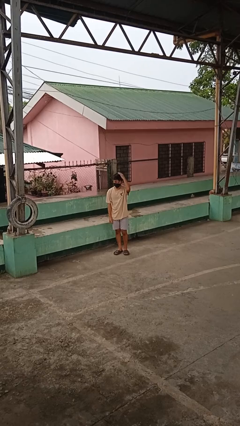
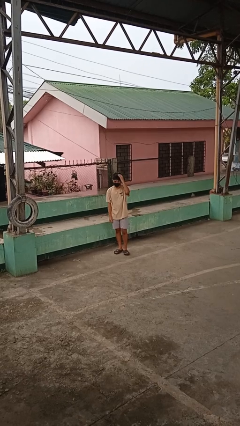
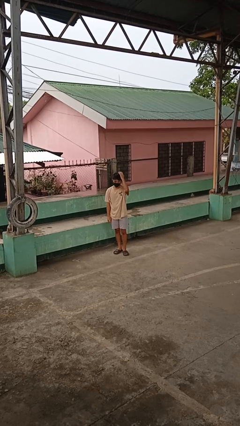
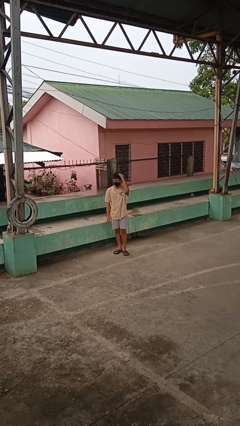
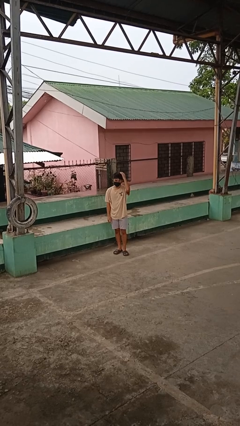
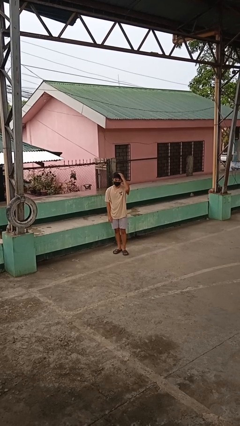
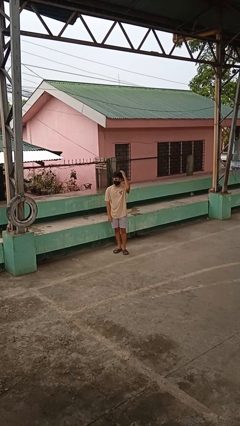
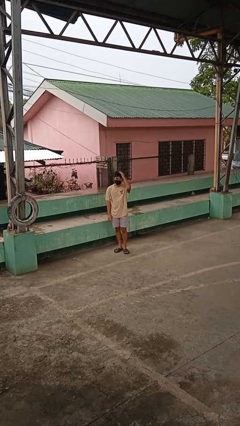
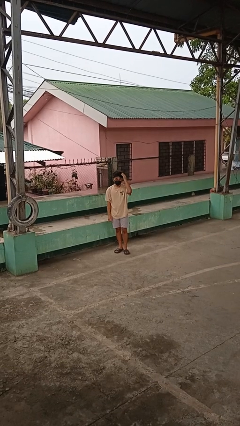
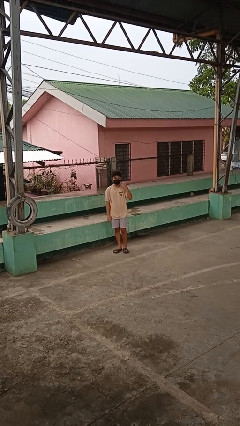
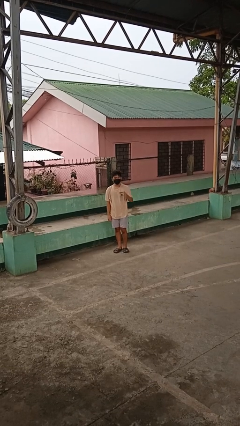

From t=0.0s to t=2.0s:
person pats head

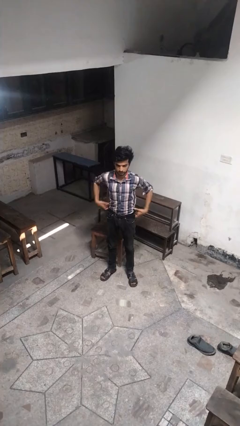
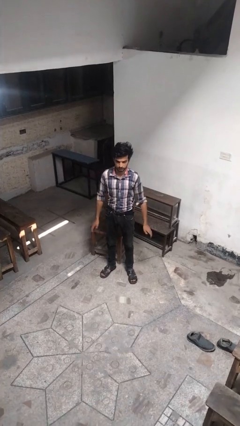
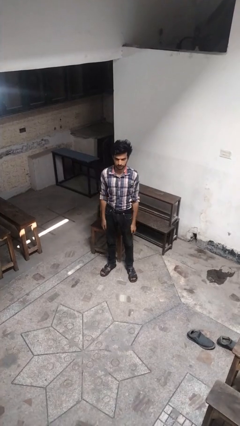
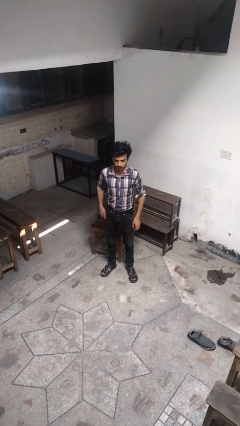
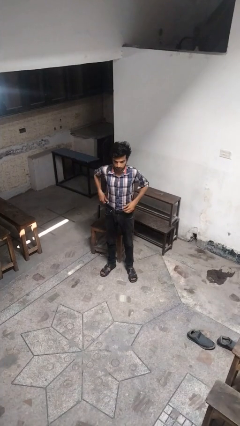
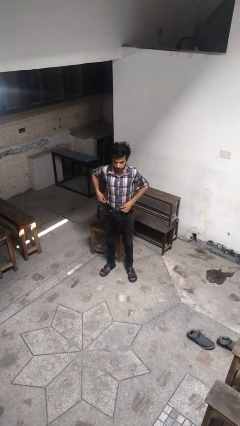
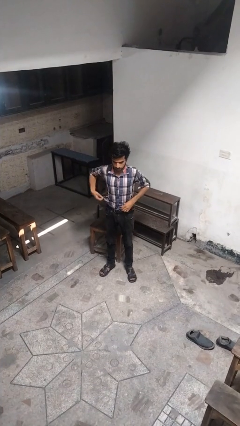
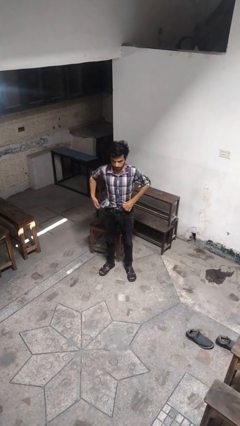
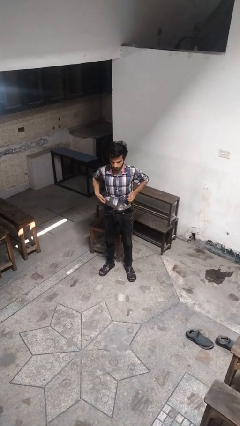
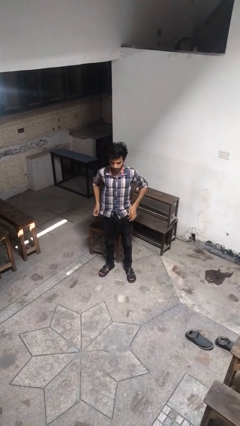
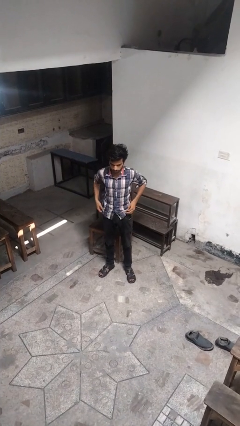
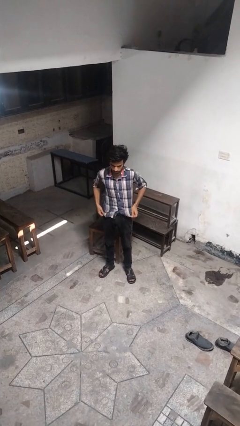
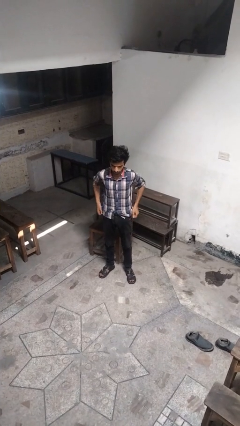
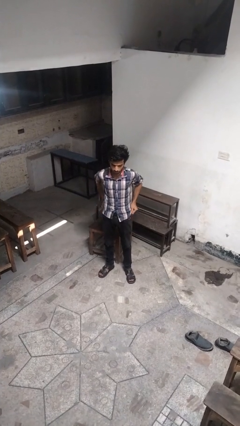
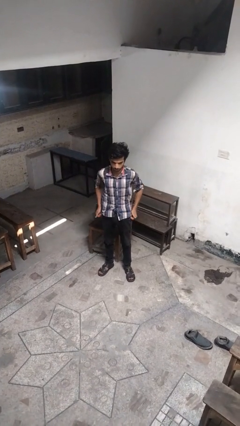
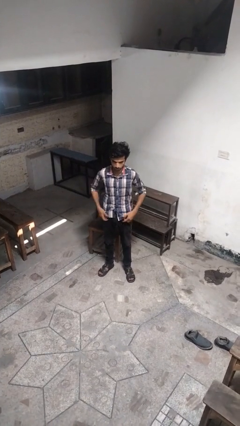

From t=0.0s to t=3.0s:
person untucks shirt

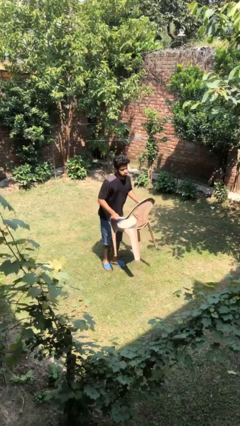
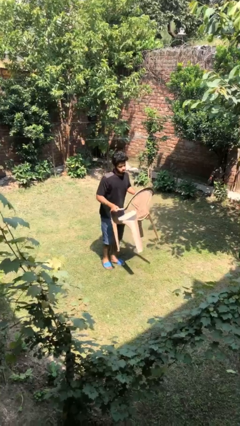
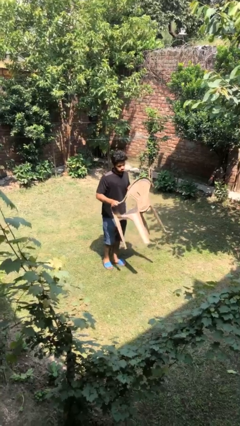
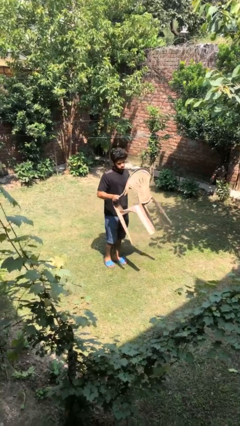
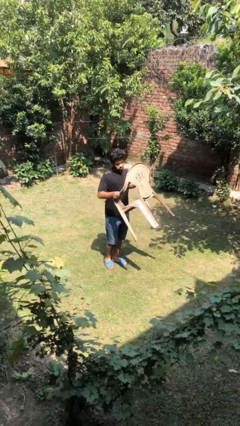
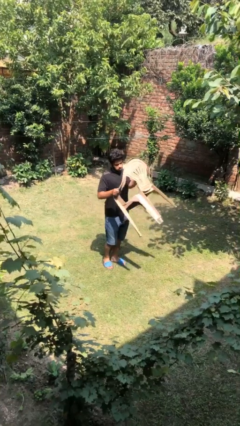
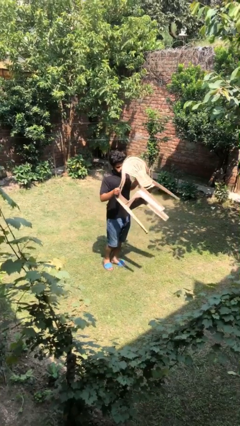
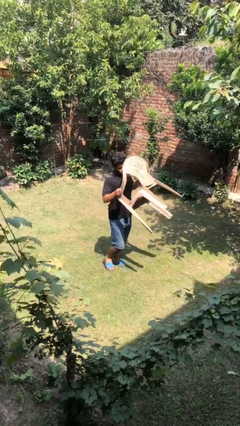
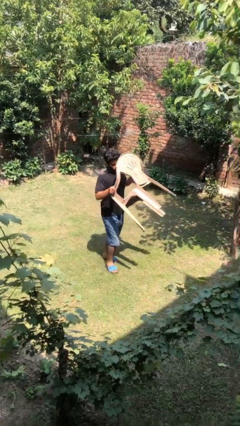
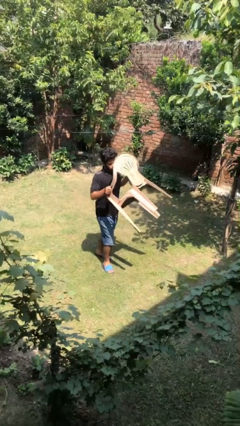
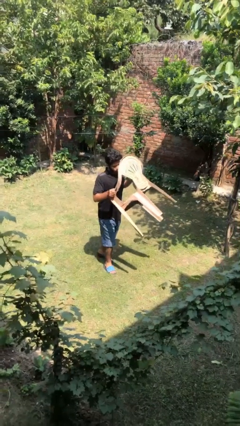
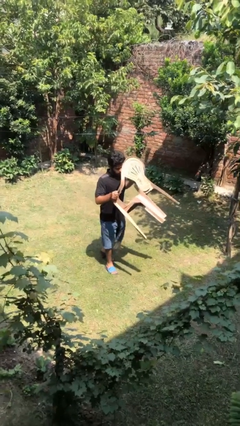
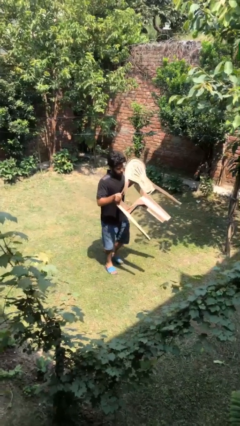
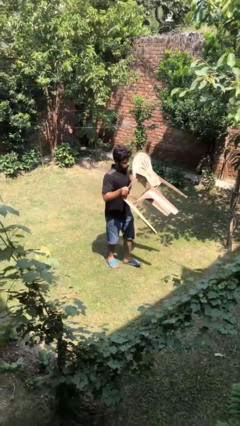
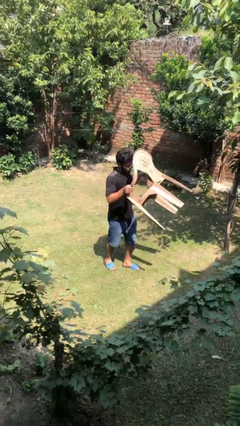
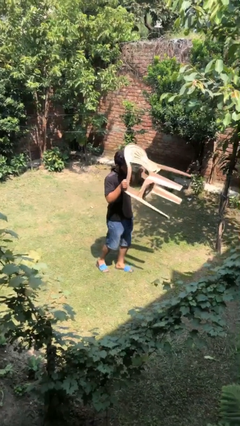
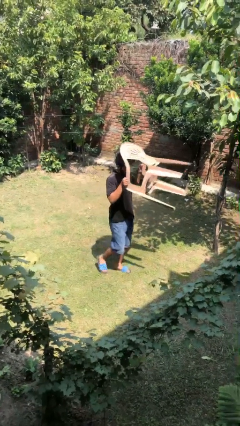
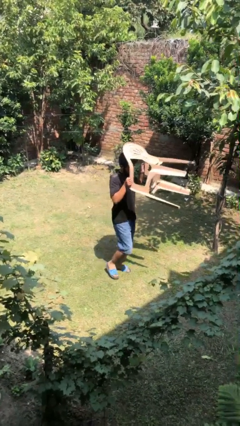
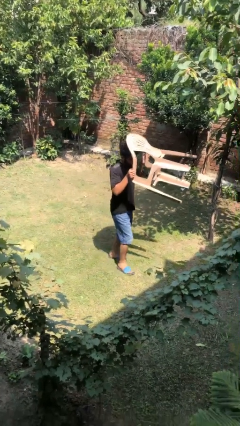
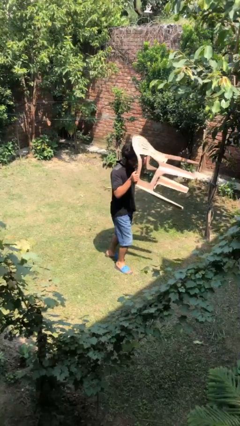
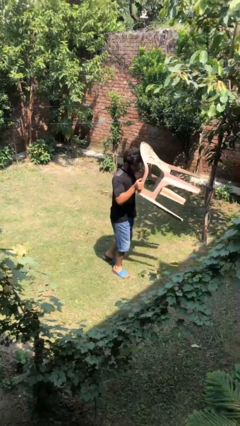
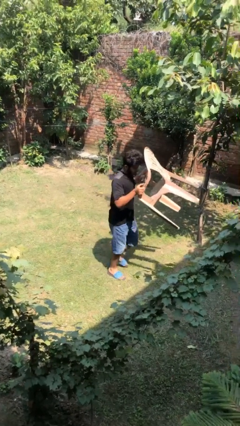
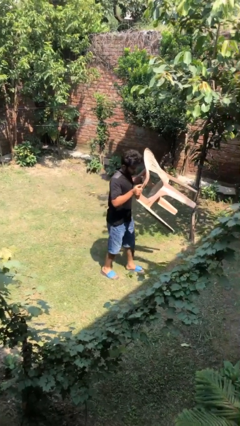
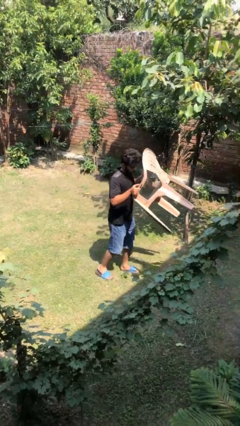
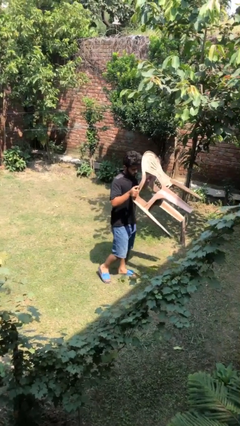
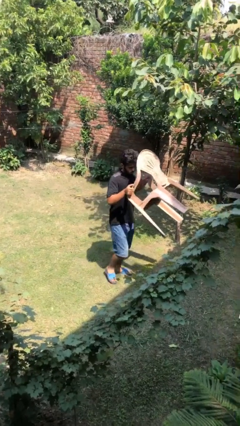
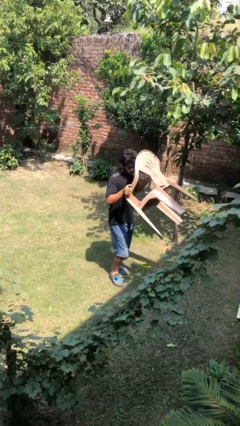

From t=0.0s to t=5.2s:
person carries heavy object

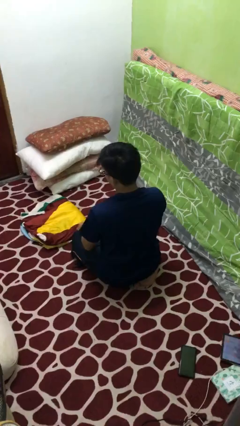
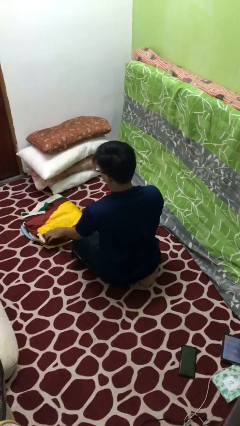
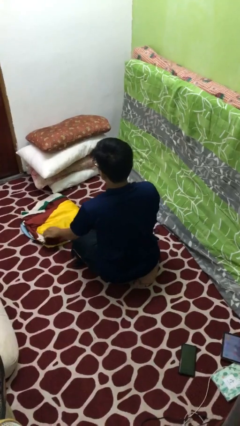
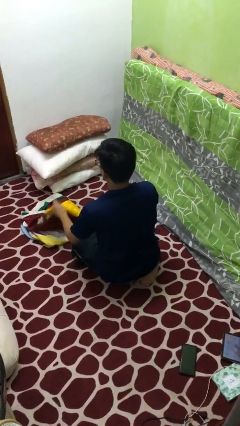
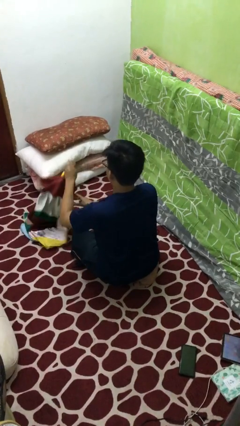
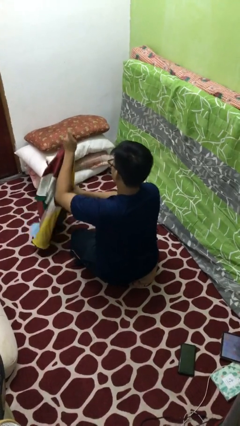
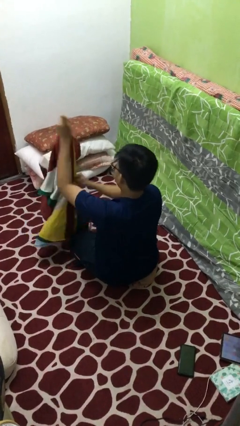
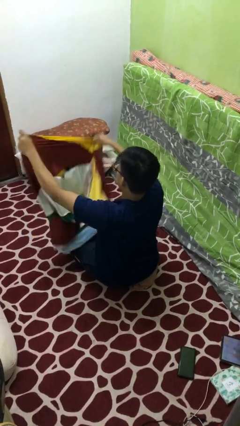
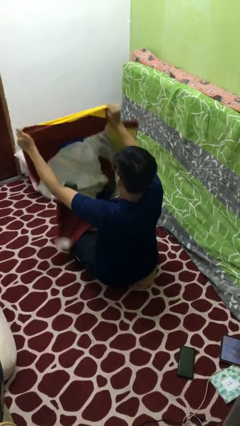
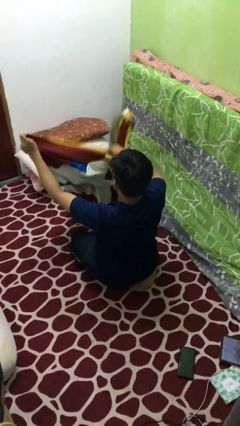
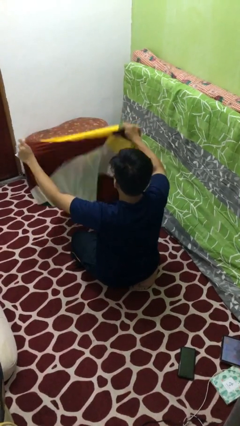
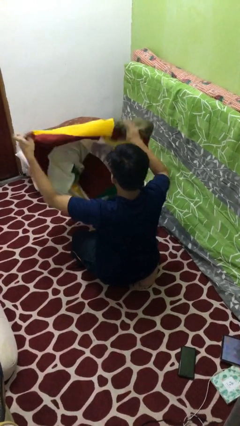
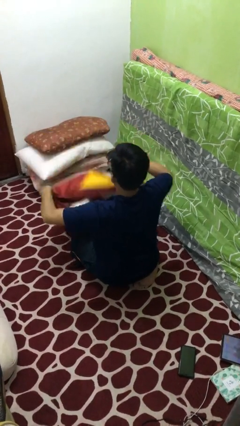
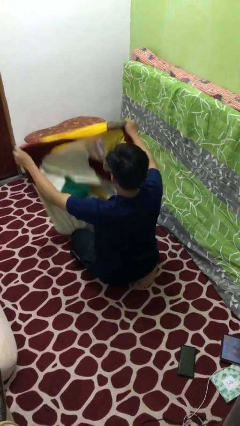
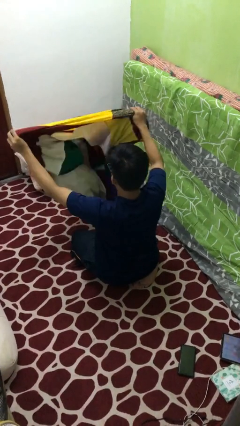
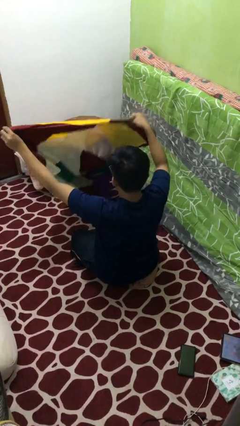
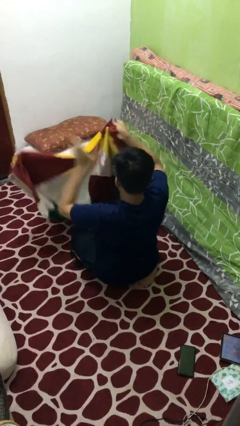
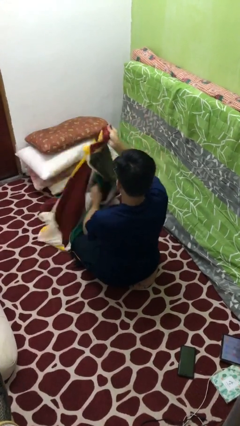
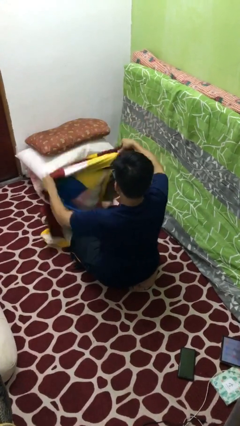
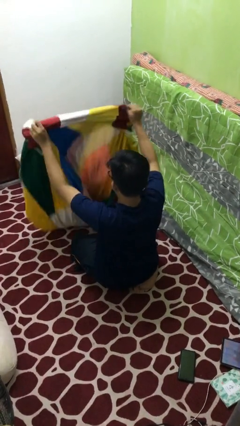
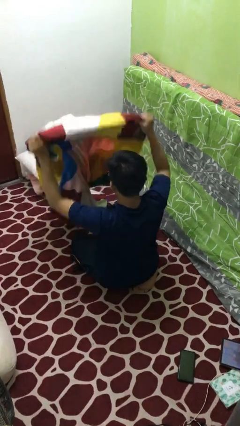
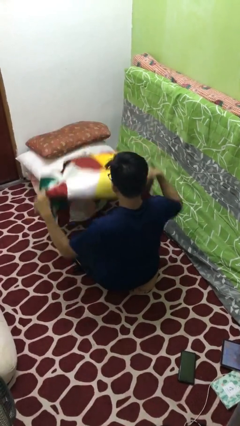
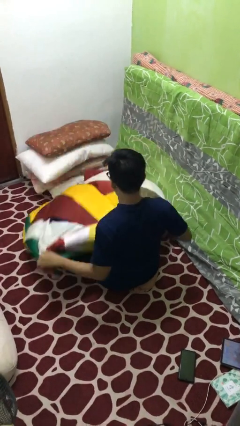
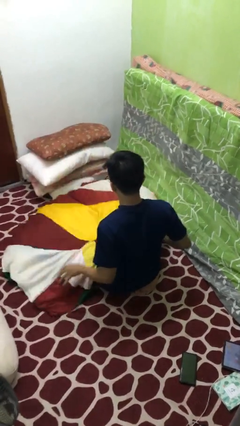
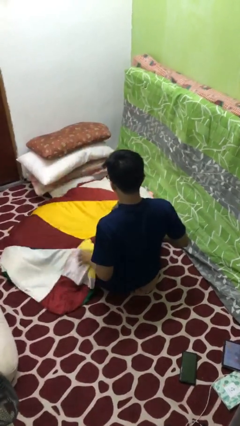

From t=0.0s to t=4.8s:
person unfolds blanket

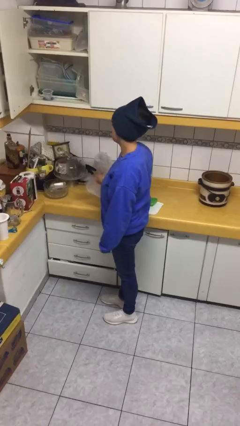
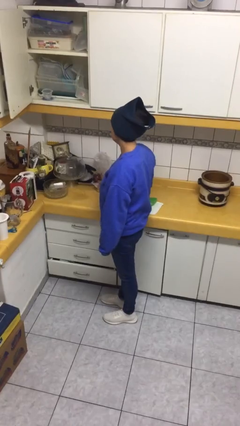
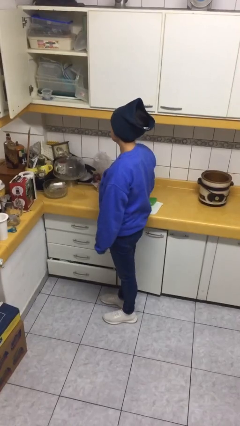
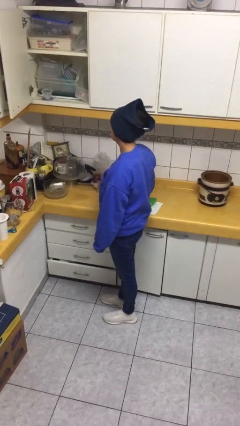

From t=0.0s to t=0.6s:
person takes object from cabinet

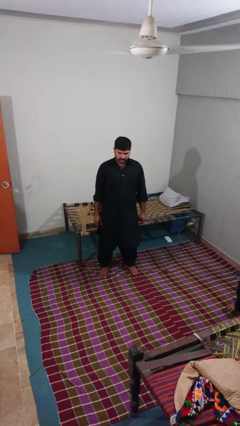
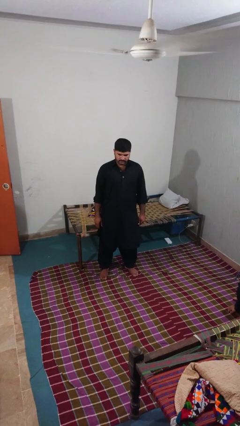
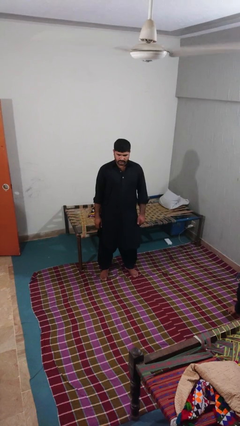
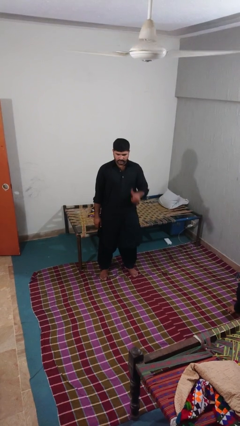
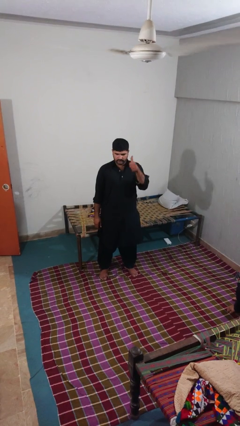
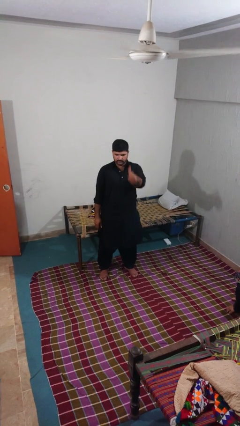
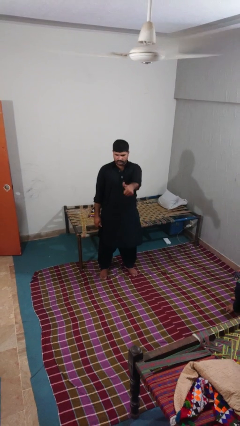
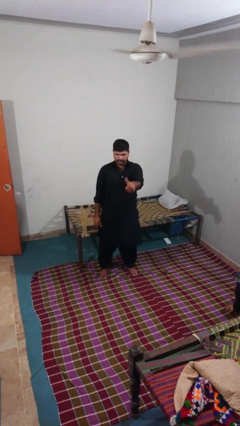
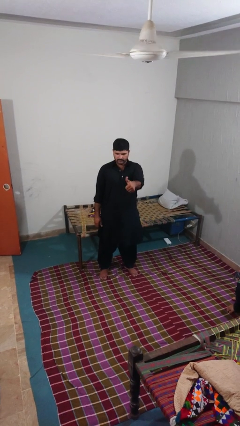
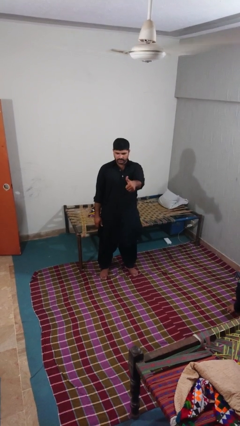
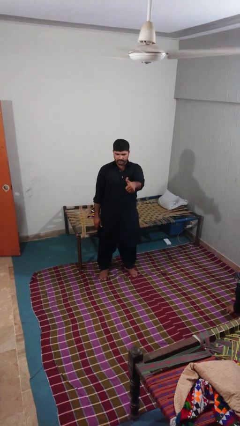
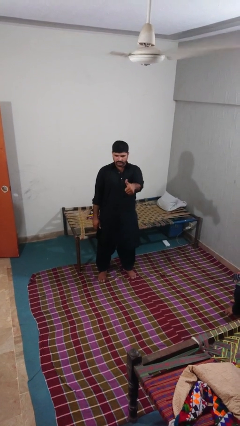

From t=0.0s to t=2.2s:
person gestures thumbs up
